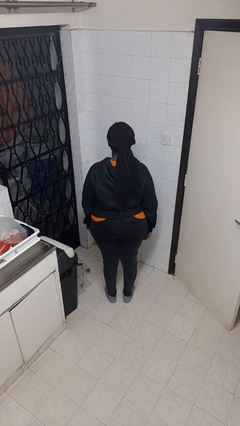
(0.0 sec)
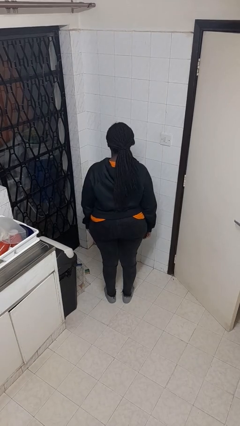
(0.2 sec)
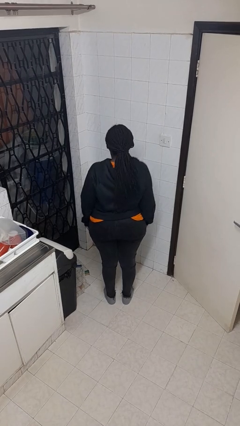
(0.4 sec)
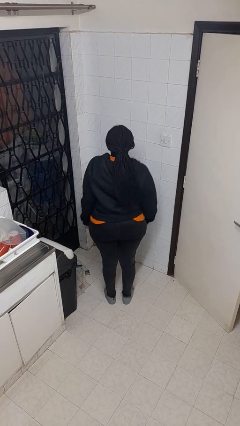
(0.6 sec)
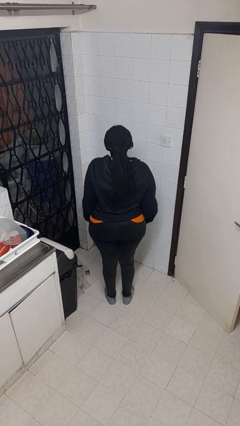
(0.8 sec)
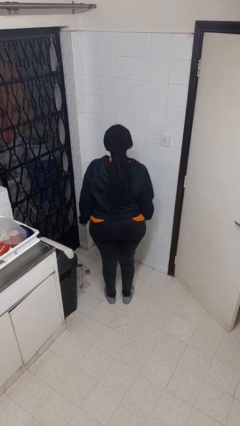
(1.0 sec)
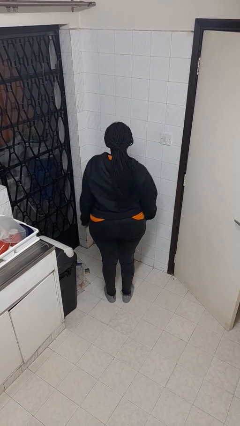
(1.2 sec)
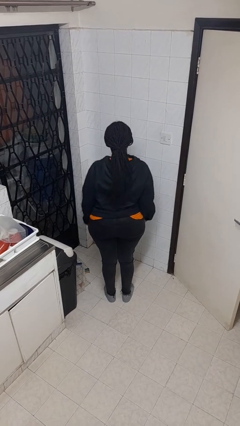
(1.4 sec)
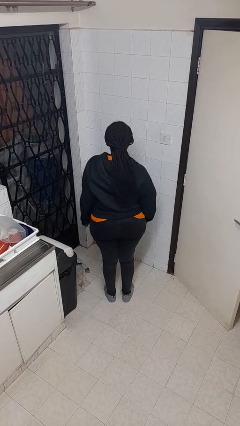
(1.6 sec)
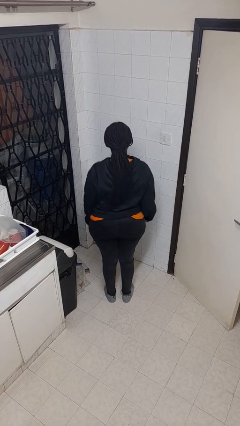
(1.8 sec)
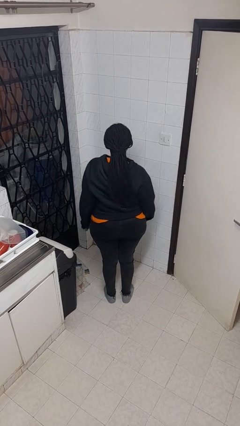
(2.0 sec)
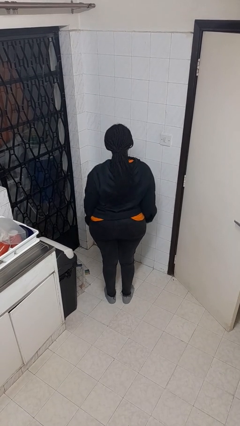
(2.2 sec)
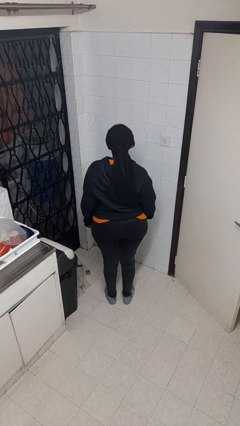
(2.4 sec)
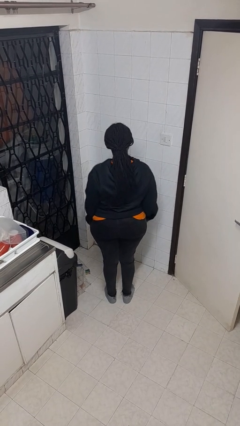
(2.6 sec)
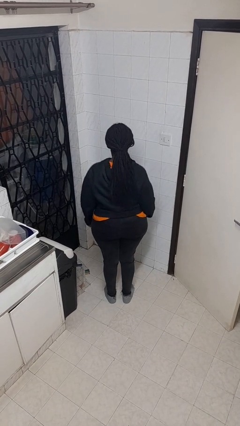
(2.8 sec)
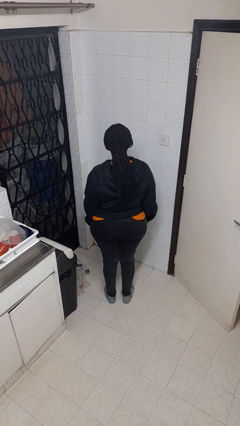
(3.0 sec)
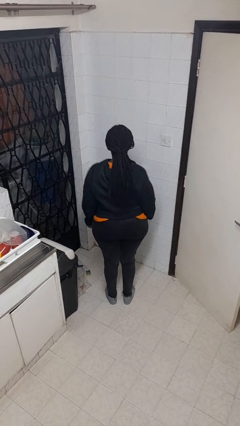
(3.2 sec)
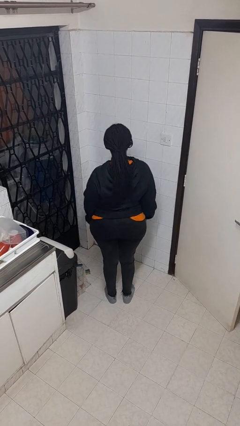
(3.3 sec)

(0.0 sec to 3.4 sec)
person dances in place

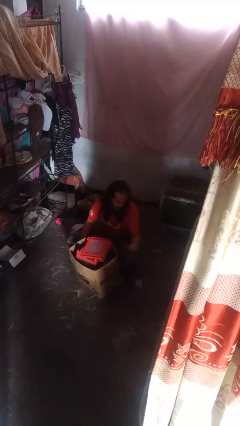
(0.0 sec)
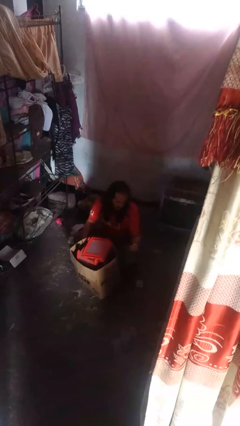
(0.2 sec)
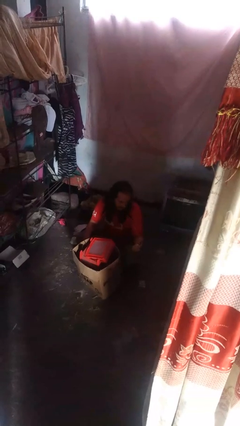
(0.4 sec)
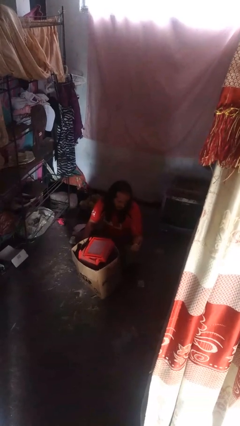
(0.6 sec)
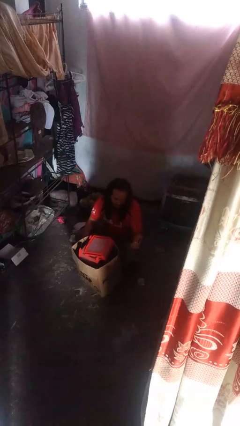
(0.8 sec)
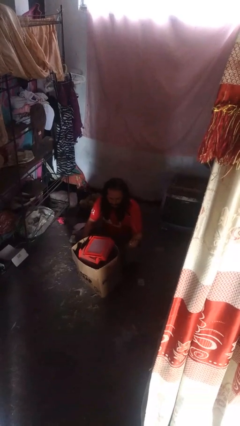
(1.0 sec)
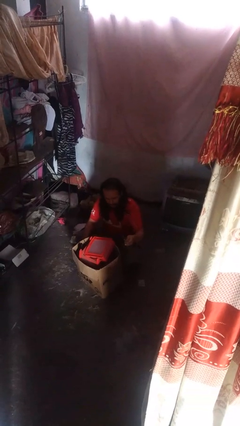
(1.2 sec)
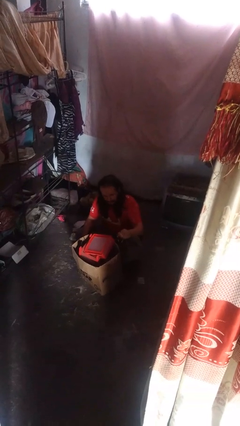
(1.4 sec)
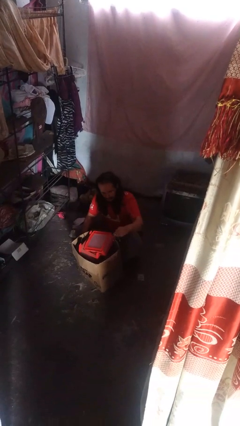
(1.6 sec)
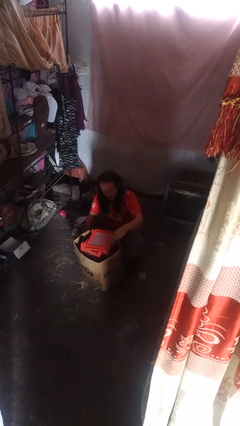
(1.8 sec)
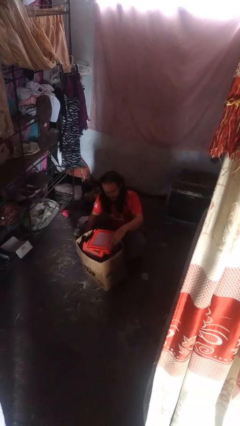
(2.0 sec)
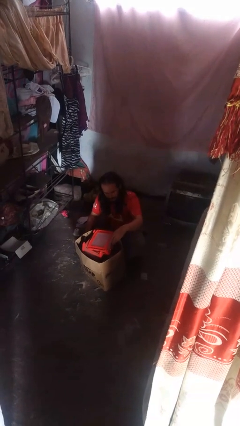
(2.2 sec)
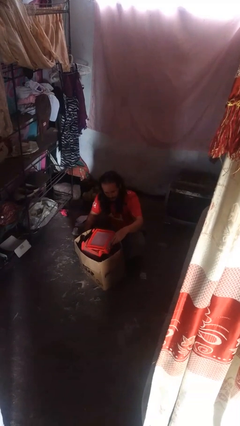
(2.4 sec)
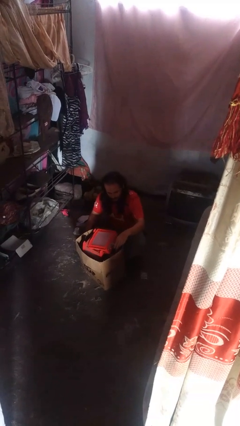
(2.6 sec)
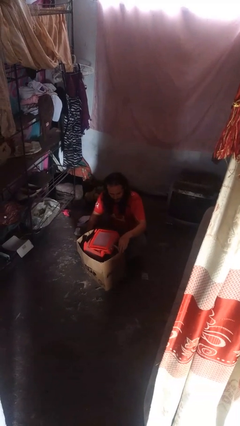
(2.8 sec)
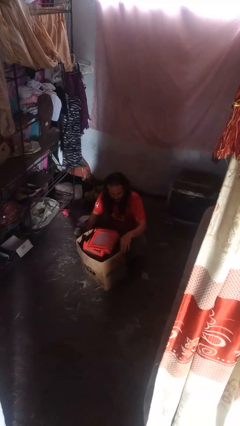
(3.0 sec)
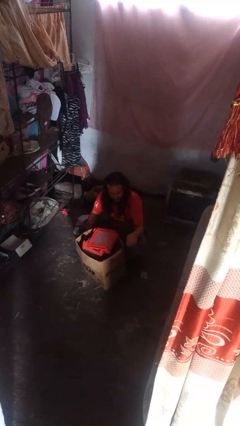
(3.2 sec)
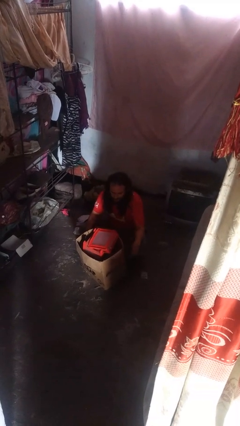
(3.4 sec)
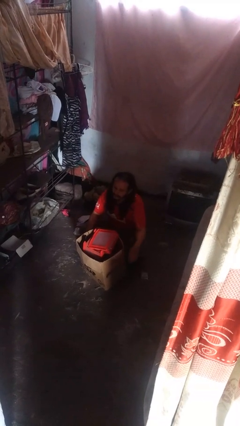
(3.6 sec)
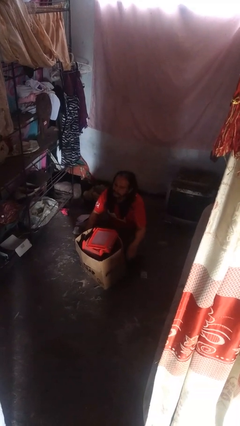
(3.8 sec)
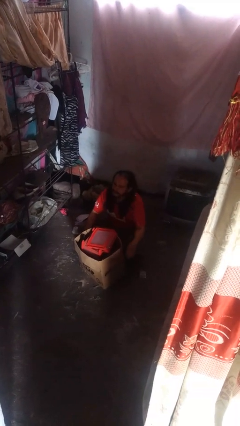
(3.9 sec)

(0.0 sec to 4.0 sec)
person puts object into box

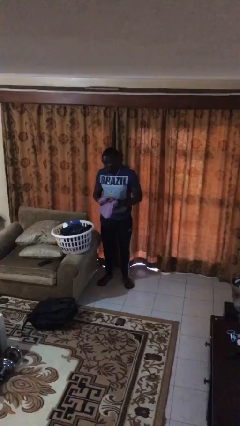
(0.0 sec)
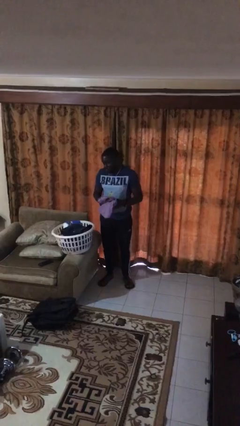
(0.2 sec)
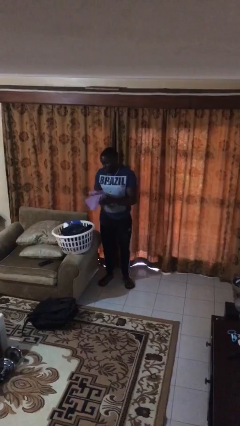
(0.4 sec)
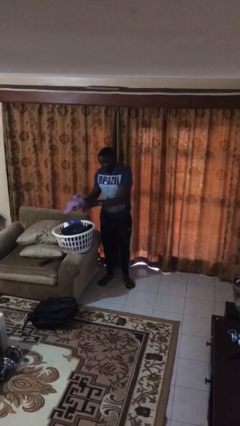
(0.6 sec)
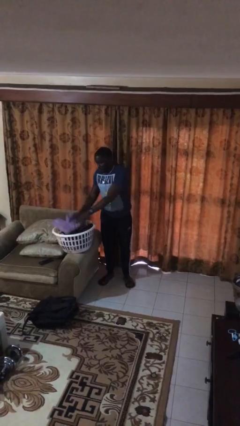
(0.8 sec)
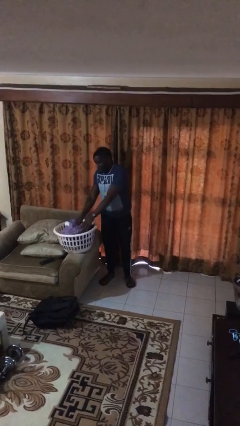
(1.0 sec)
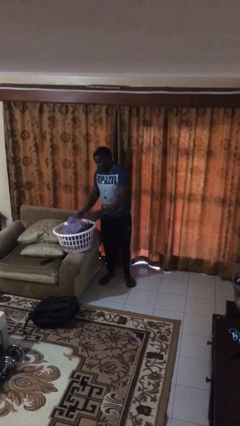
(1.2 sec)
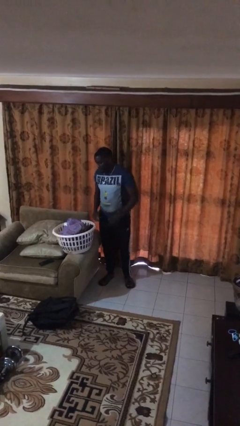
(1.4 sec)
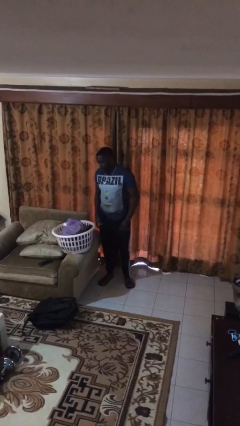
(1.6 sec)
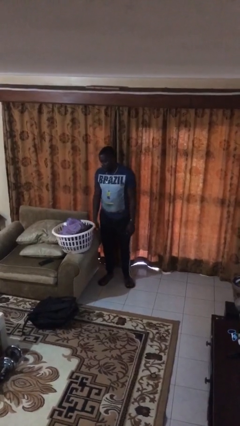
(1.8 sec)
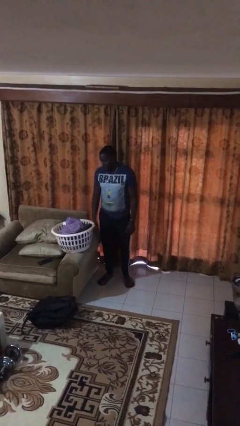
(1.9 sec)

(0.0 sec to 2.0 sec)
person puts object into basket

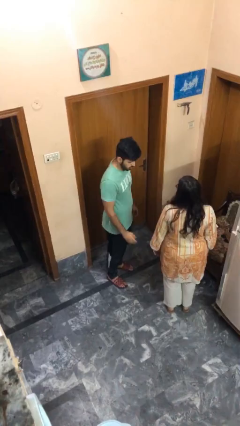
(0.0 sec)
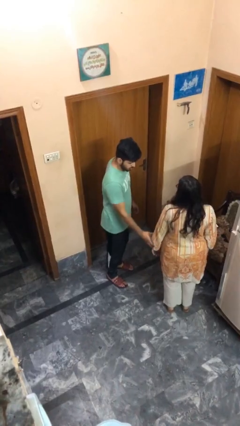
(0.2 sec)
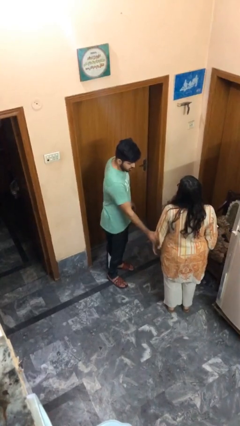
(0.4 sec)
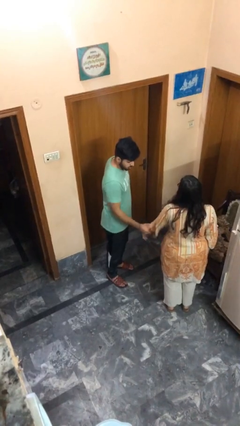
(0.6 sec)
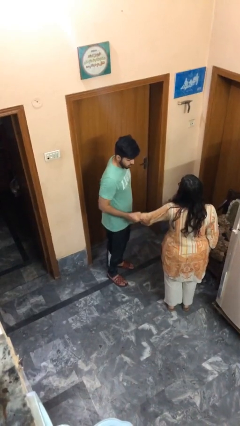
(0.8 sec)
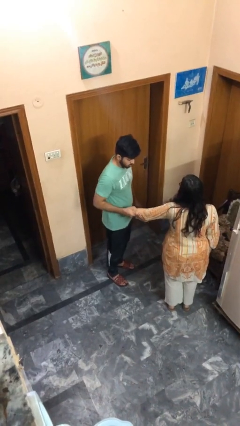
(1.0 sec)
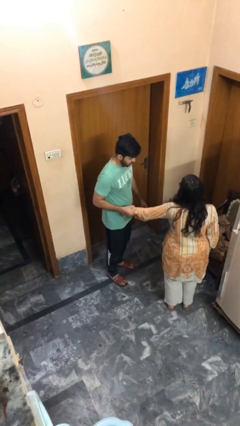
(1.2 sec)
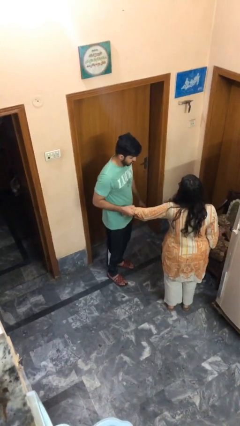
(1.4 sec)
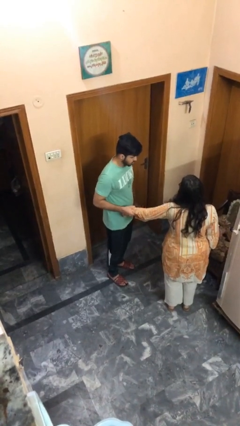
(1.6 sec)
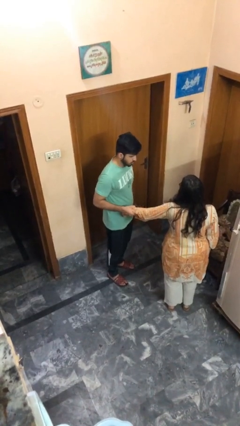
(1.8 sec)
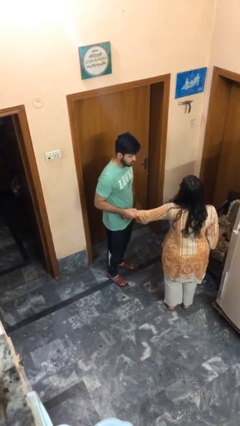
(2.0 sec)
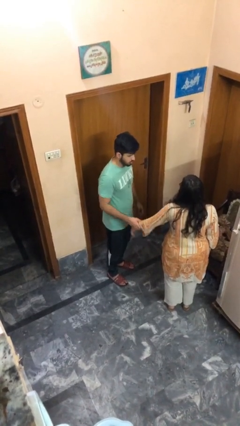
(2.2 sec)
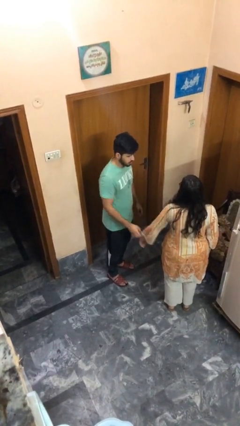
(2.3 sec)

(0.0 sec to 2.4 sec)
person grabs person by forearm

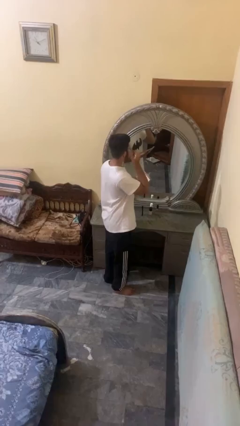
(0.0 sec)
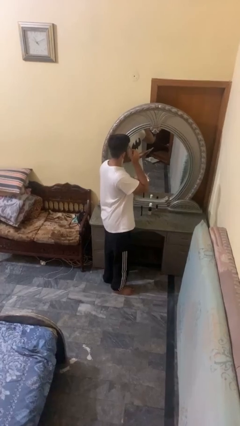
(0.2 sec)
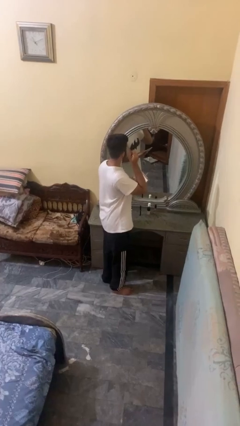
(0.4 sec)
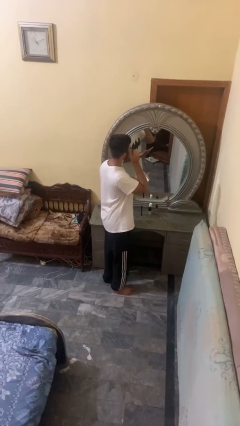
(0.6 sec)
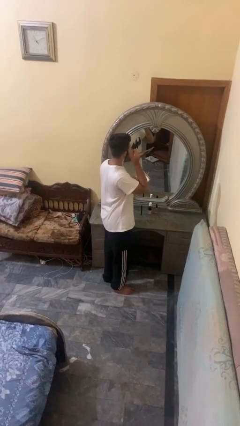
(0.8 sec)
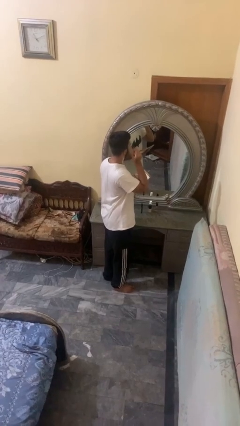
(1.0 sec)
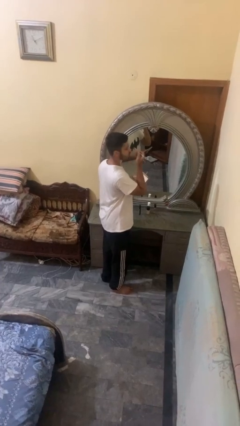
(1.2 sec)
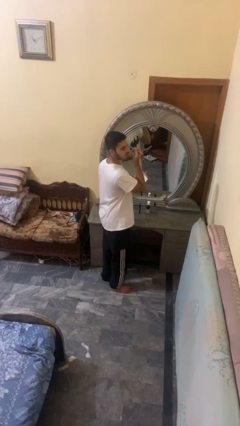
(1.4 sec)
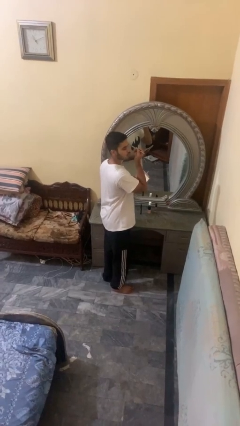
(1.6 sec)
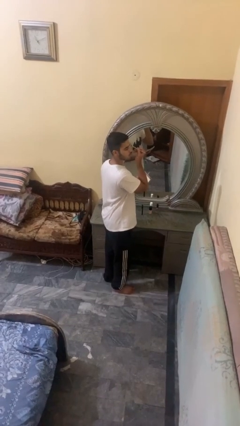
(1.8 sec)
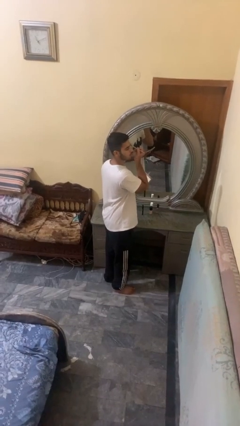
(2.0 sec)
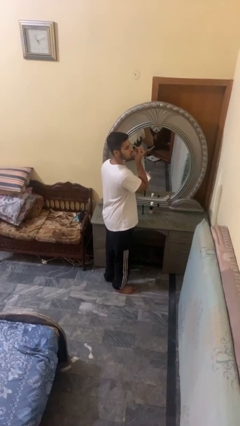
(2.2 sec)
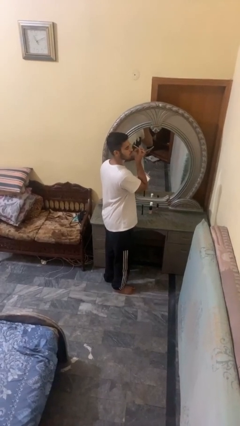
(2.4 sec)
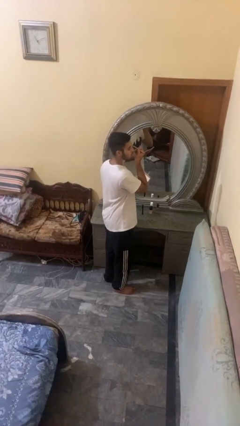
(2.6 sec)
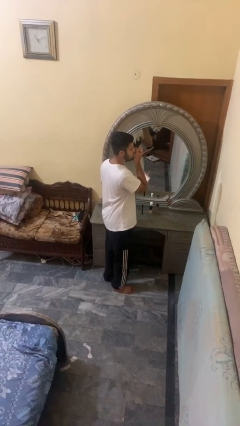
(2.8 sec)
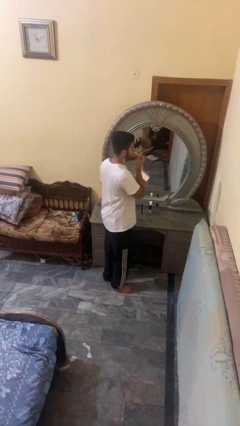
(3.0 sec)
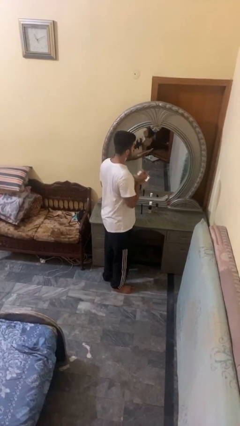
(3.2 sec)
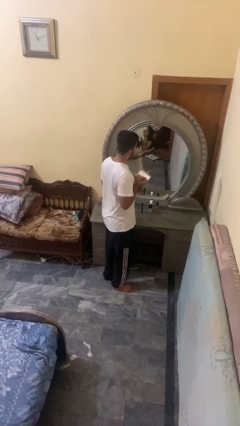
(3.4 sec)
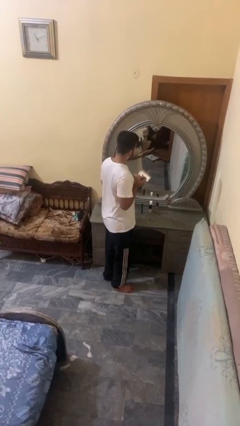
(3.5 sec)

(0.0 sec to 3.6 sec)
person applies eye makeup

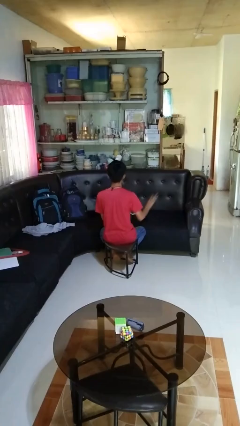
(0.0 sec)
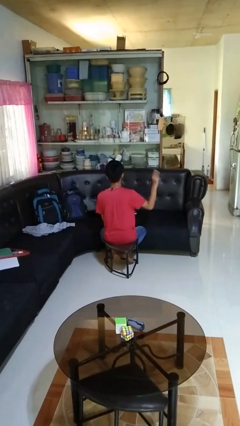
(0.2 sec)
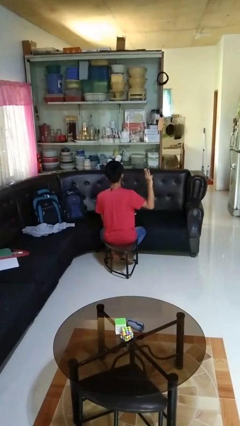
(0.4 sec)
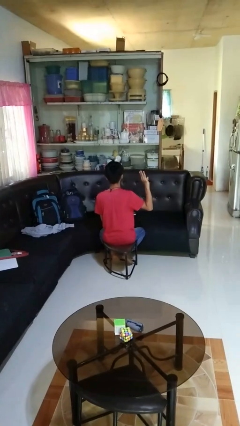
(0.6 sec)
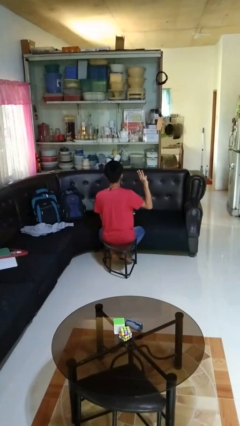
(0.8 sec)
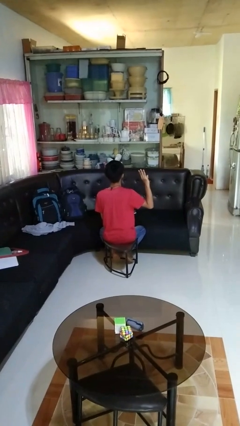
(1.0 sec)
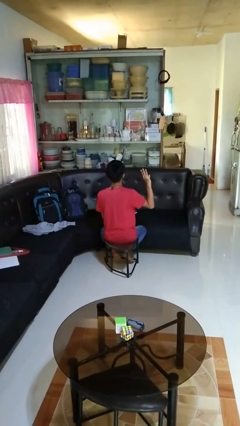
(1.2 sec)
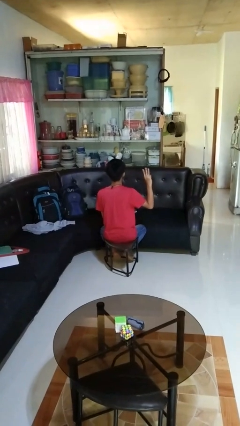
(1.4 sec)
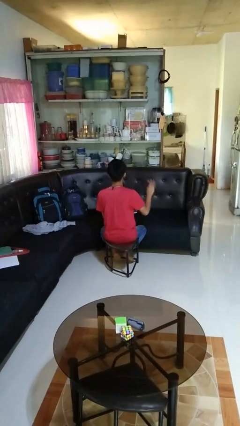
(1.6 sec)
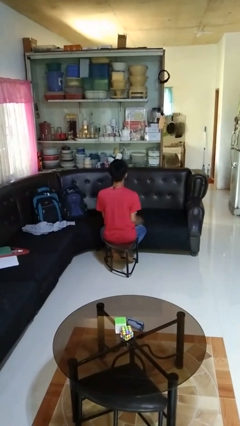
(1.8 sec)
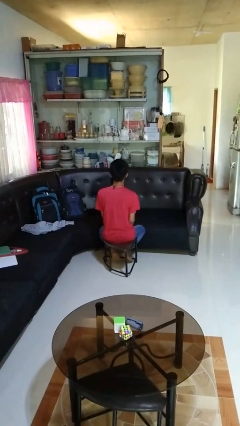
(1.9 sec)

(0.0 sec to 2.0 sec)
person gestures number three
